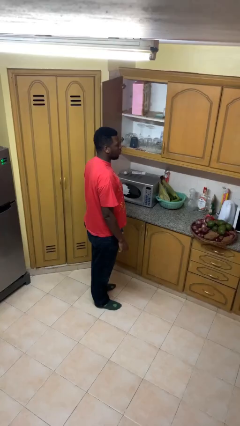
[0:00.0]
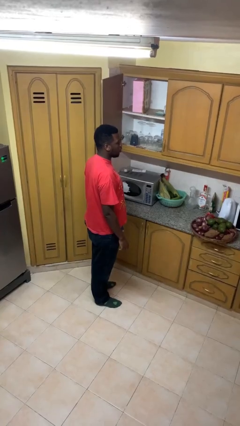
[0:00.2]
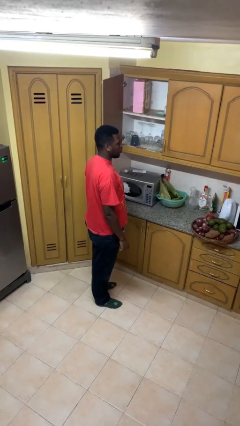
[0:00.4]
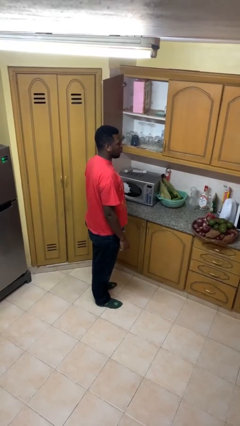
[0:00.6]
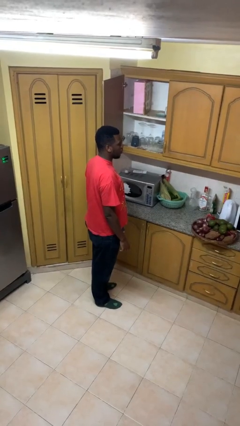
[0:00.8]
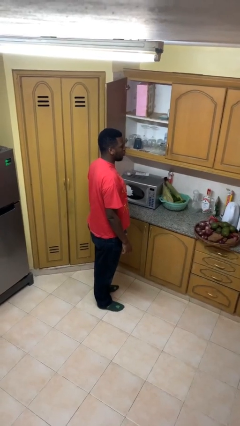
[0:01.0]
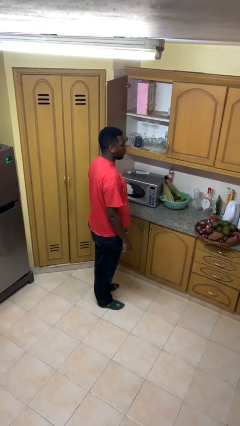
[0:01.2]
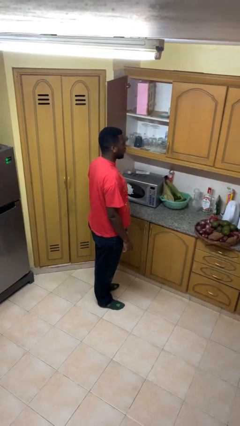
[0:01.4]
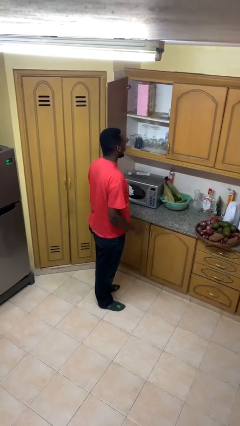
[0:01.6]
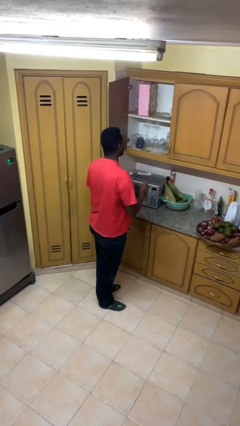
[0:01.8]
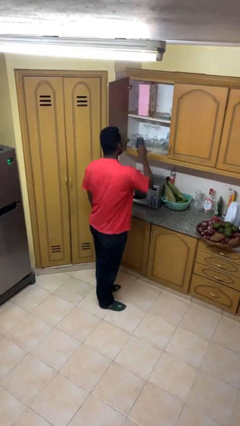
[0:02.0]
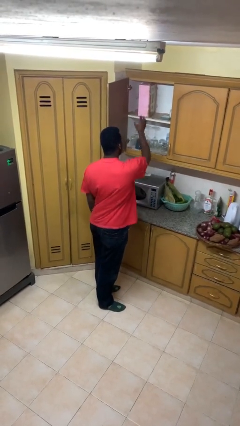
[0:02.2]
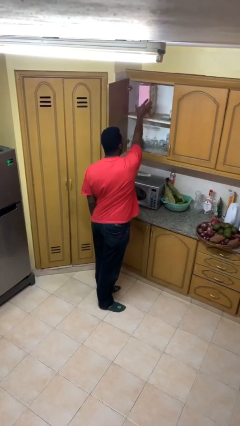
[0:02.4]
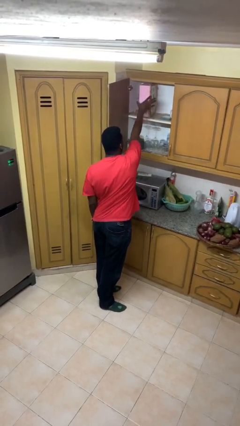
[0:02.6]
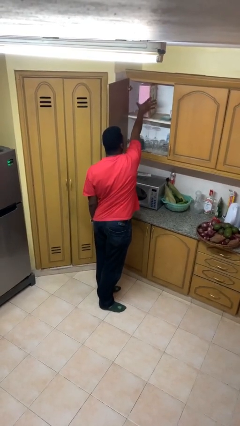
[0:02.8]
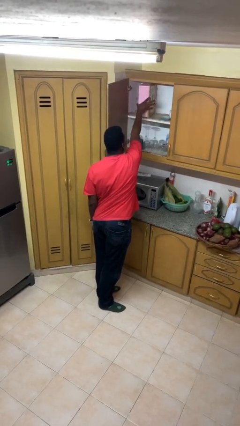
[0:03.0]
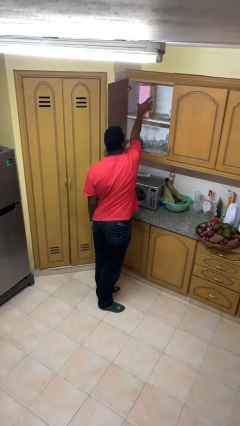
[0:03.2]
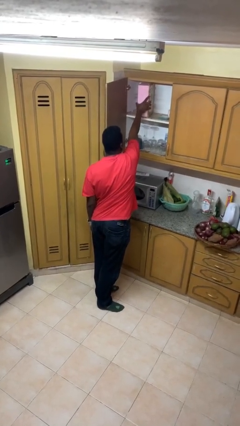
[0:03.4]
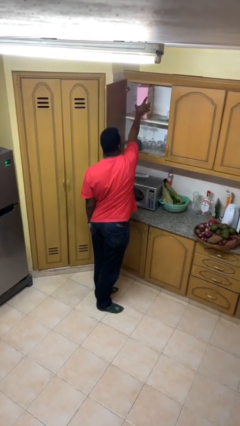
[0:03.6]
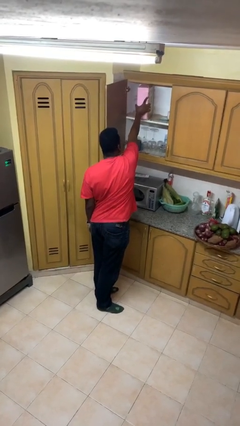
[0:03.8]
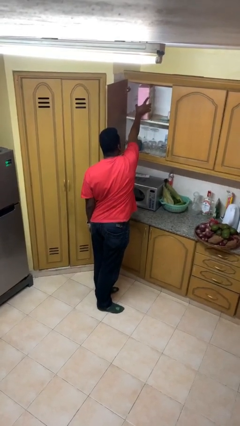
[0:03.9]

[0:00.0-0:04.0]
person picks up object from shelf

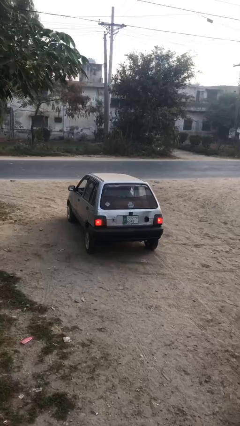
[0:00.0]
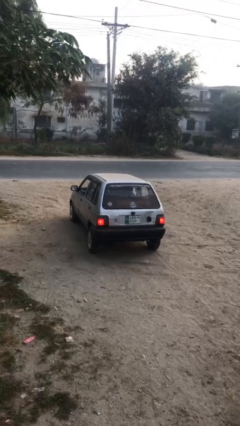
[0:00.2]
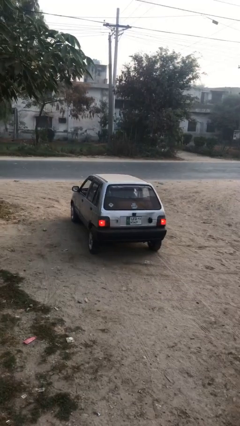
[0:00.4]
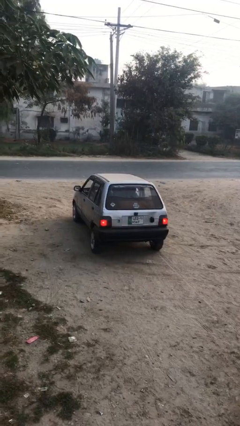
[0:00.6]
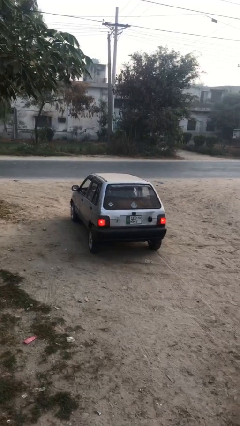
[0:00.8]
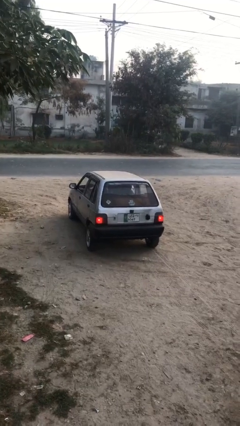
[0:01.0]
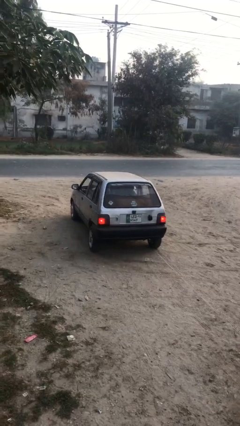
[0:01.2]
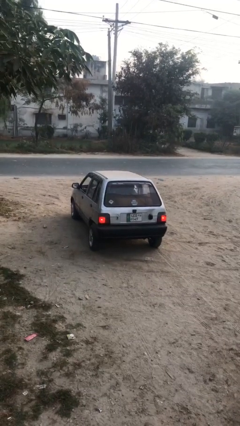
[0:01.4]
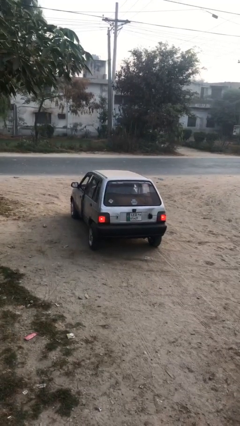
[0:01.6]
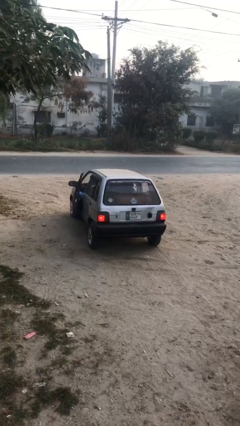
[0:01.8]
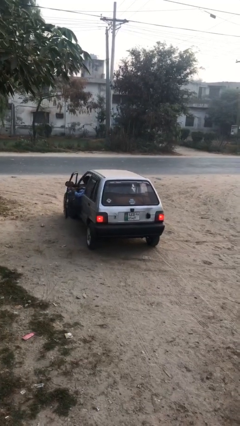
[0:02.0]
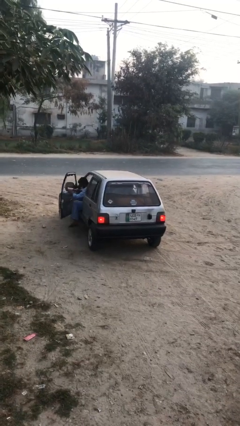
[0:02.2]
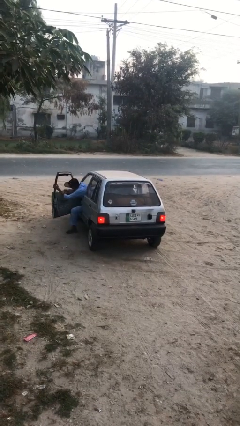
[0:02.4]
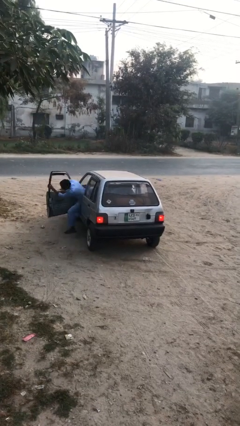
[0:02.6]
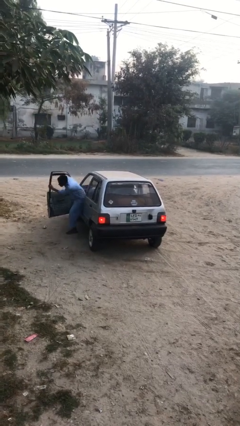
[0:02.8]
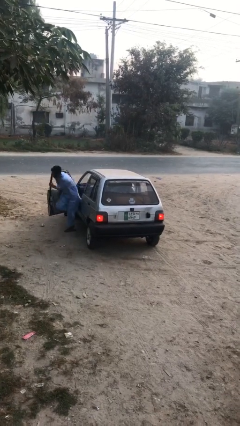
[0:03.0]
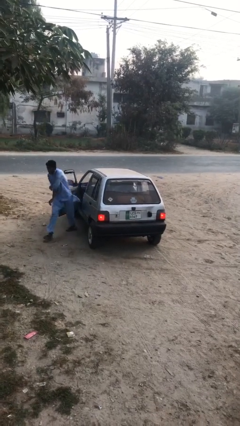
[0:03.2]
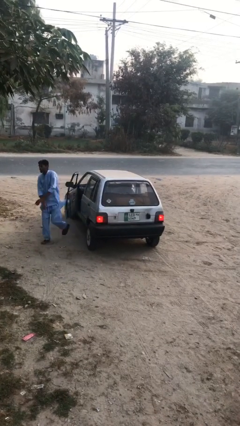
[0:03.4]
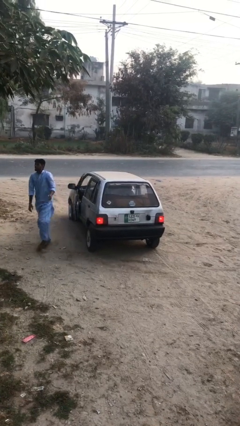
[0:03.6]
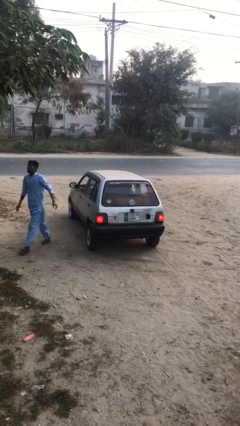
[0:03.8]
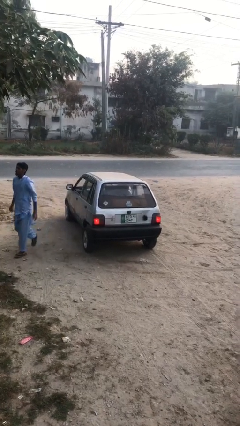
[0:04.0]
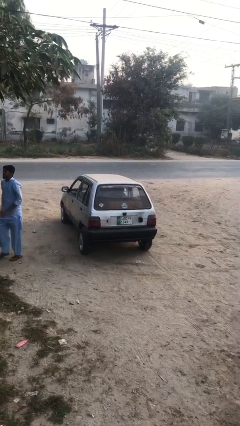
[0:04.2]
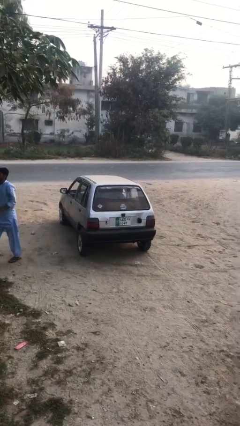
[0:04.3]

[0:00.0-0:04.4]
car drops off person

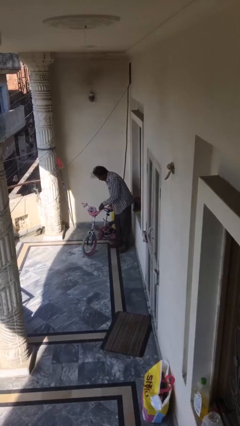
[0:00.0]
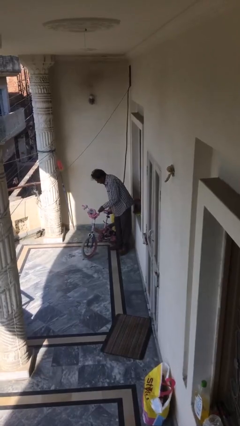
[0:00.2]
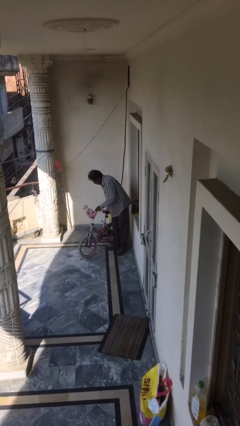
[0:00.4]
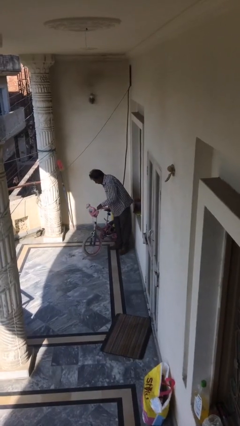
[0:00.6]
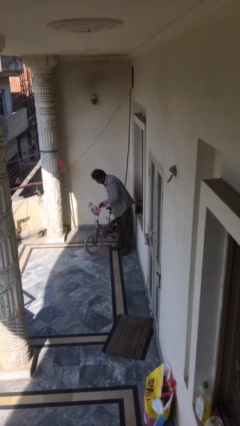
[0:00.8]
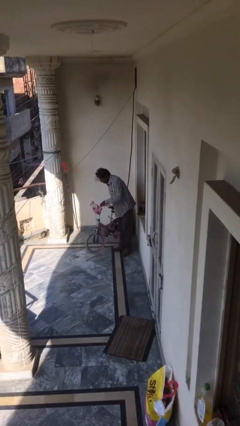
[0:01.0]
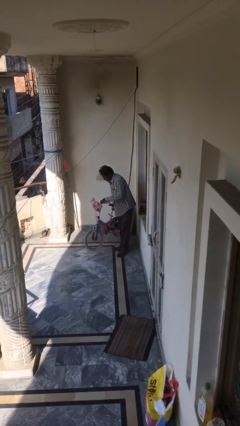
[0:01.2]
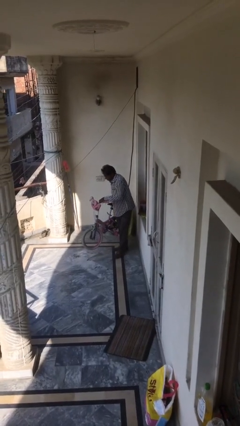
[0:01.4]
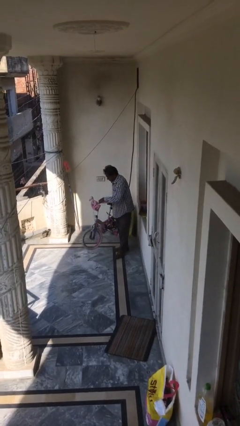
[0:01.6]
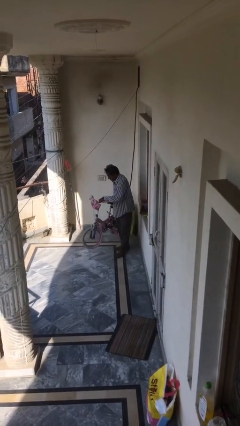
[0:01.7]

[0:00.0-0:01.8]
person picks up object from floor

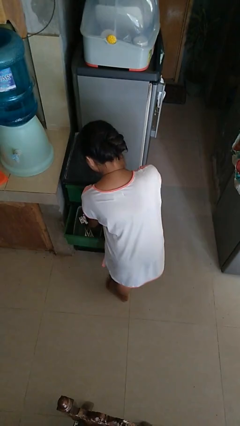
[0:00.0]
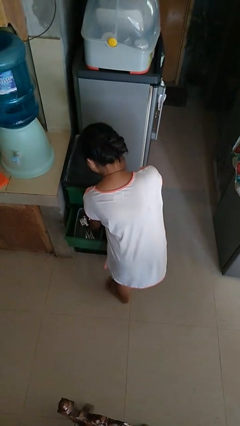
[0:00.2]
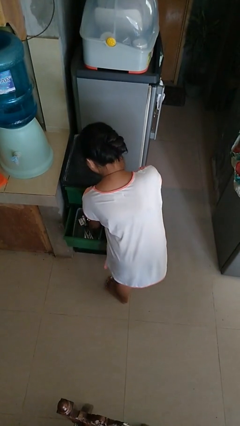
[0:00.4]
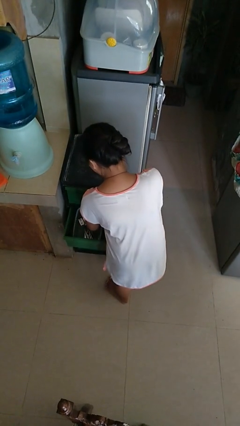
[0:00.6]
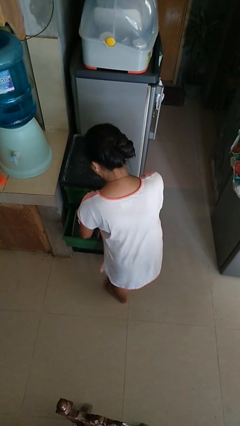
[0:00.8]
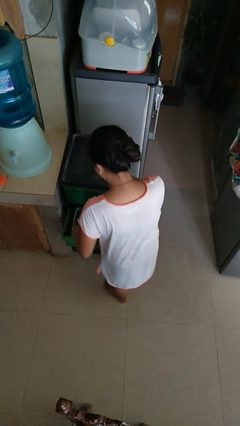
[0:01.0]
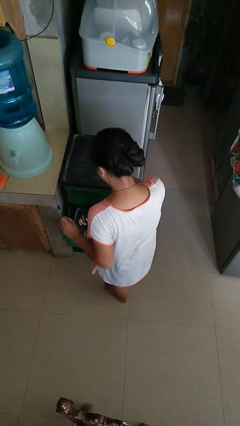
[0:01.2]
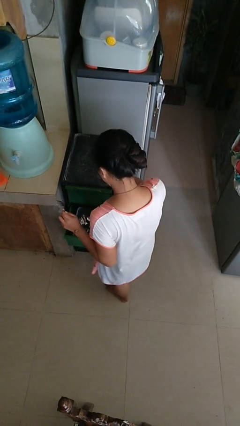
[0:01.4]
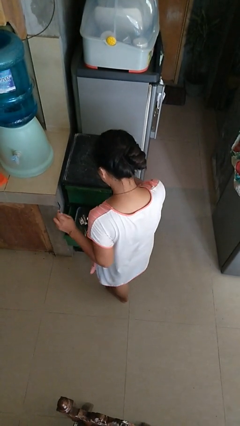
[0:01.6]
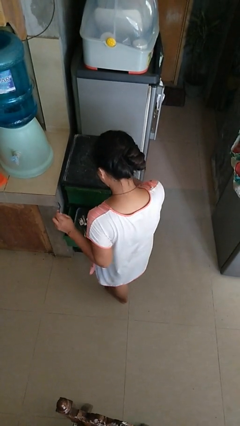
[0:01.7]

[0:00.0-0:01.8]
person takes object from kitchen drawer

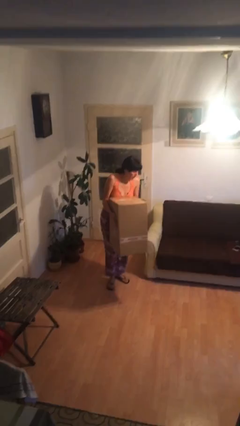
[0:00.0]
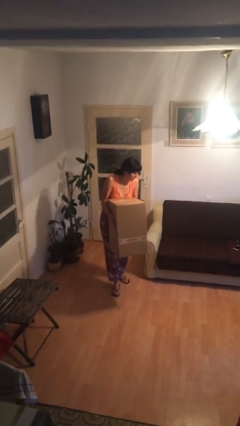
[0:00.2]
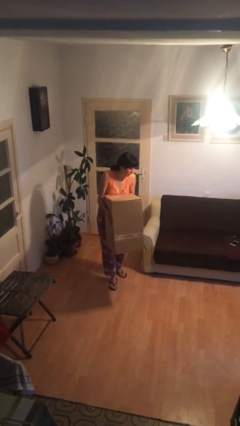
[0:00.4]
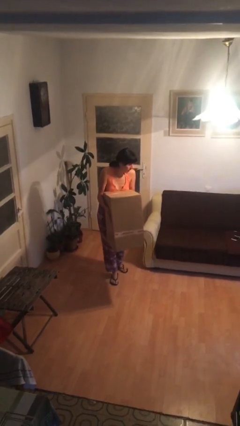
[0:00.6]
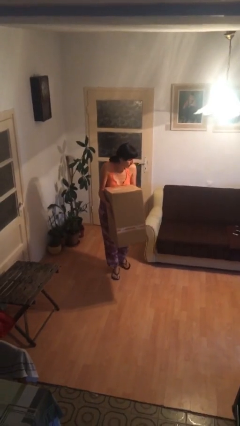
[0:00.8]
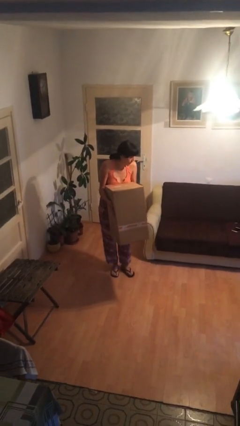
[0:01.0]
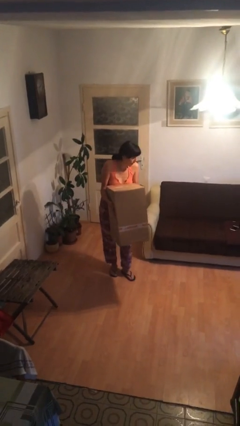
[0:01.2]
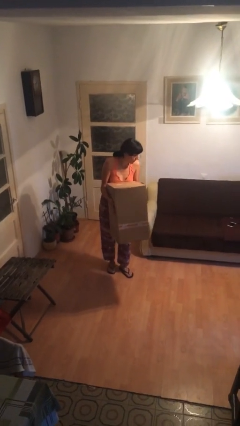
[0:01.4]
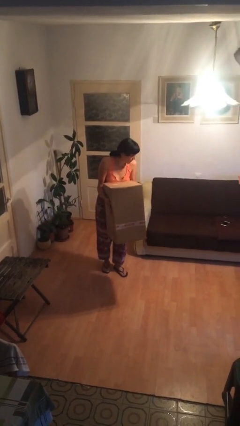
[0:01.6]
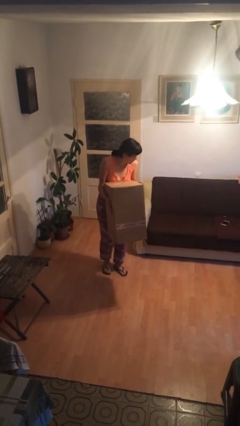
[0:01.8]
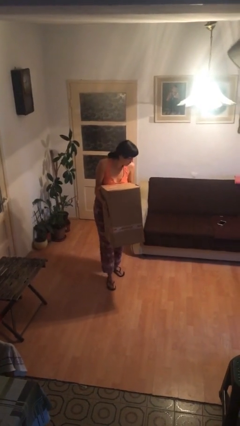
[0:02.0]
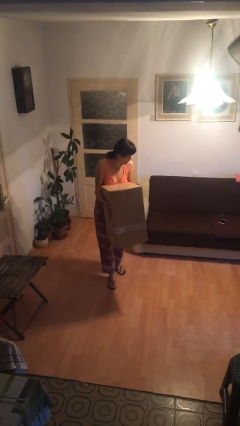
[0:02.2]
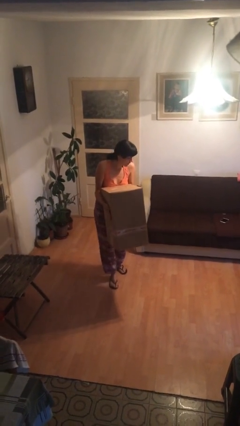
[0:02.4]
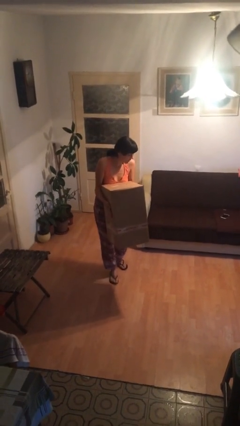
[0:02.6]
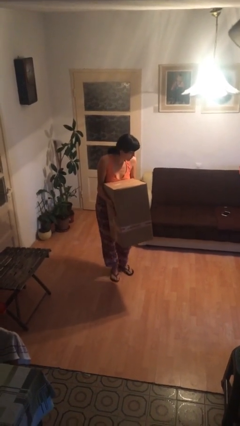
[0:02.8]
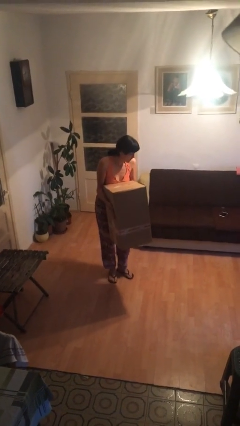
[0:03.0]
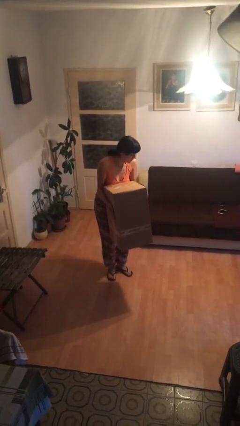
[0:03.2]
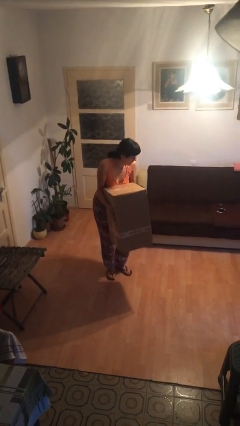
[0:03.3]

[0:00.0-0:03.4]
person carries heavy object

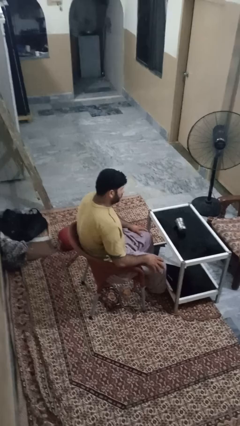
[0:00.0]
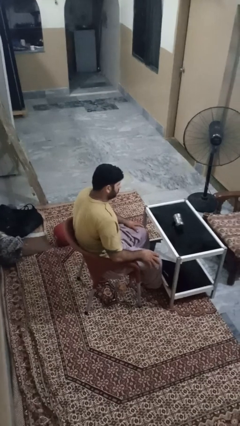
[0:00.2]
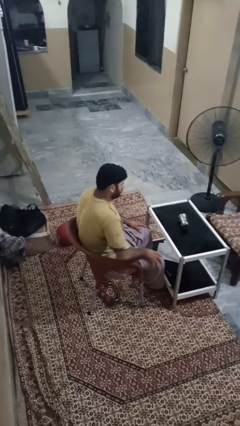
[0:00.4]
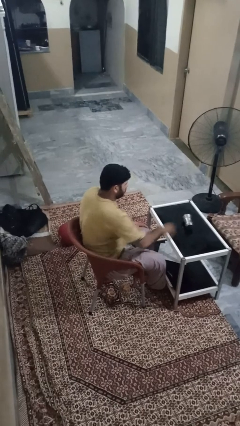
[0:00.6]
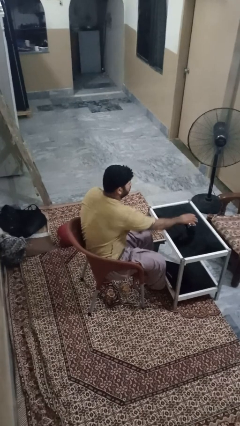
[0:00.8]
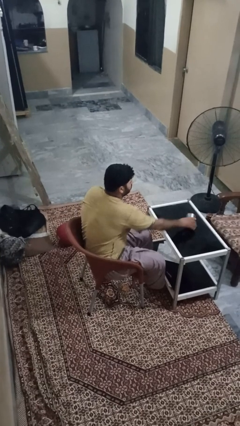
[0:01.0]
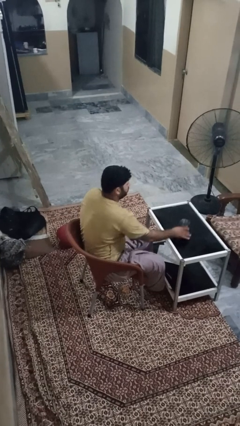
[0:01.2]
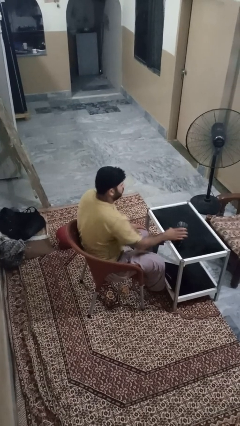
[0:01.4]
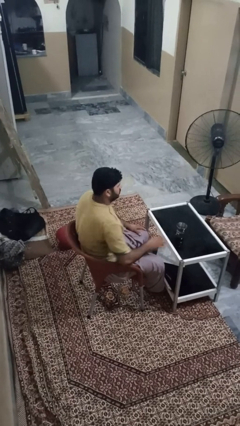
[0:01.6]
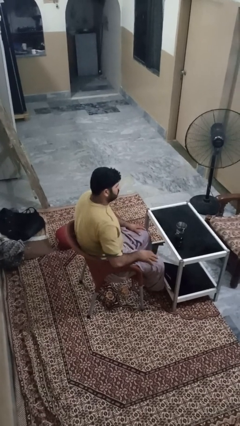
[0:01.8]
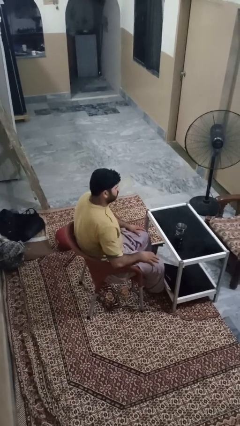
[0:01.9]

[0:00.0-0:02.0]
person sets upright glass
